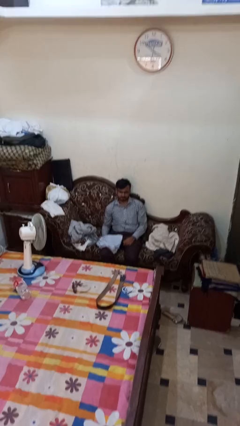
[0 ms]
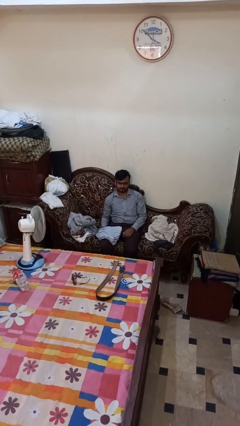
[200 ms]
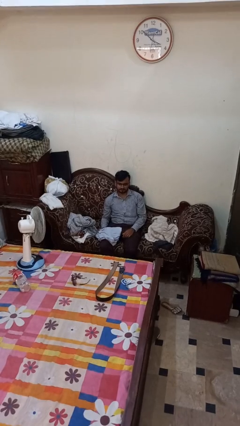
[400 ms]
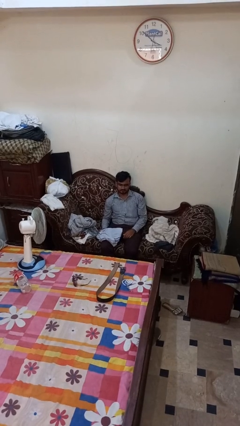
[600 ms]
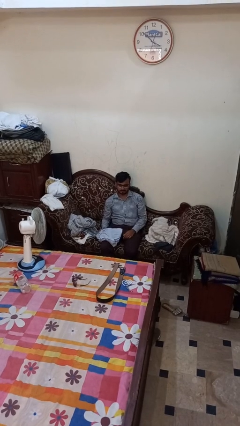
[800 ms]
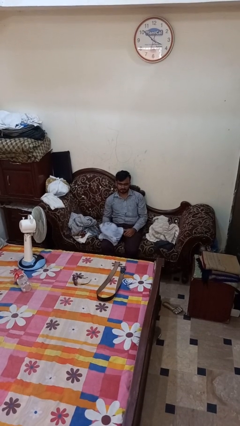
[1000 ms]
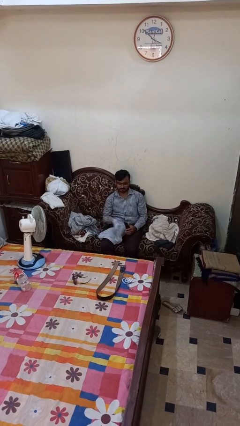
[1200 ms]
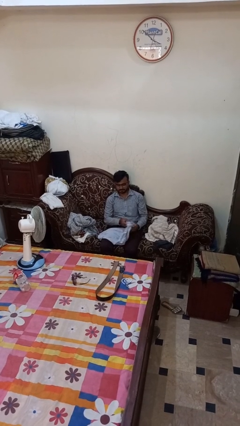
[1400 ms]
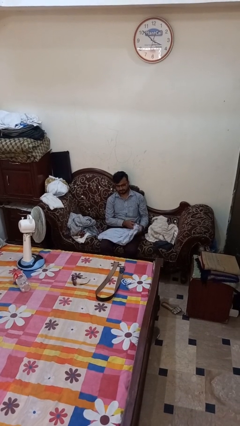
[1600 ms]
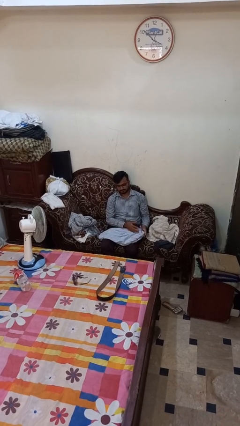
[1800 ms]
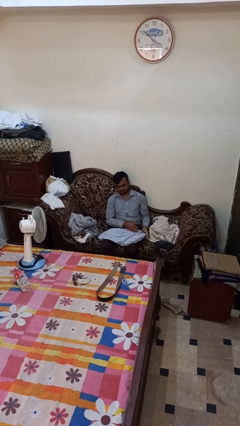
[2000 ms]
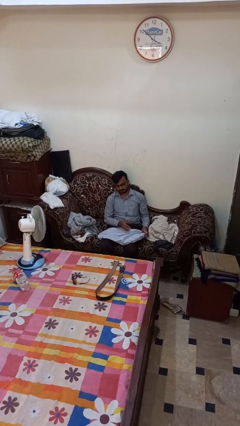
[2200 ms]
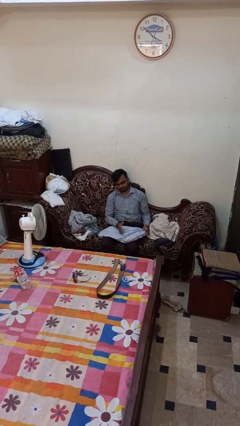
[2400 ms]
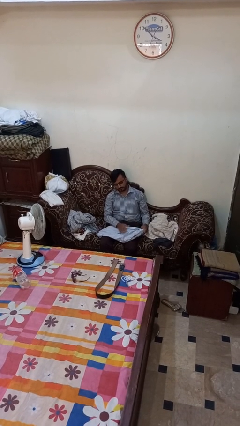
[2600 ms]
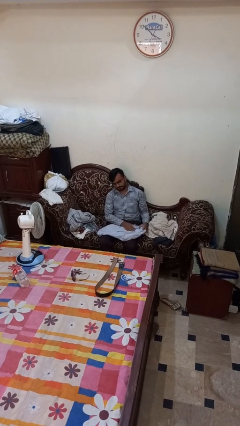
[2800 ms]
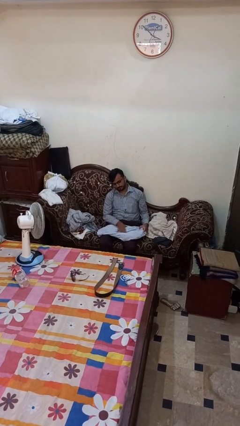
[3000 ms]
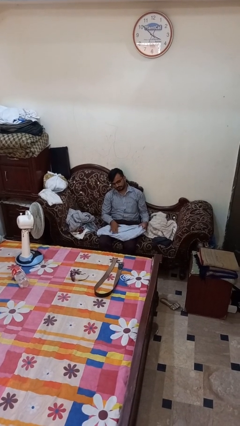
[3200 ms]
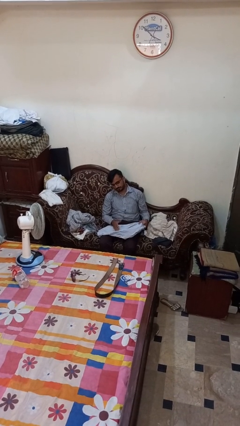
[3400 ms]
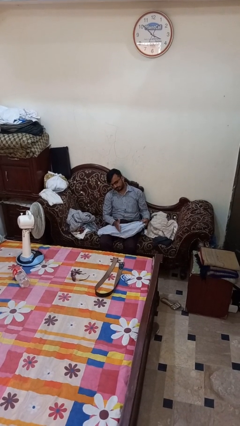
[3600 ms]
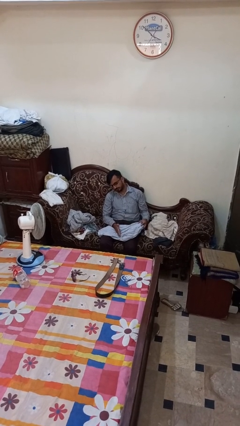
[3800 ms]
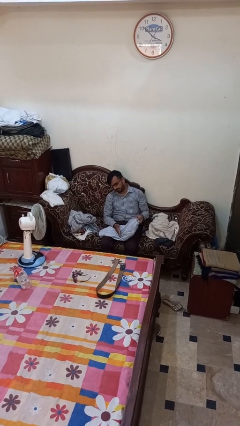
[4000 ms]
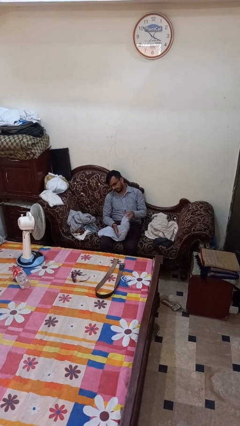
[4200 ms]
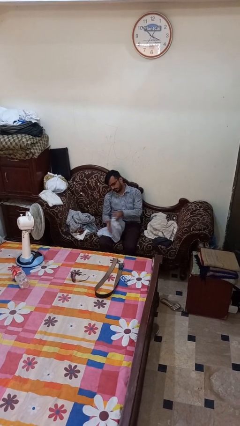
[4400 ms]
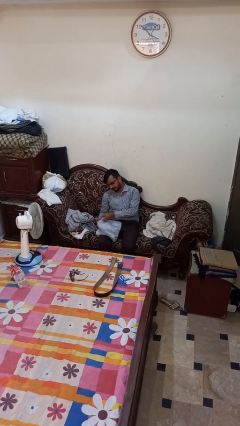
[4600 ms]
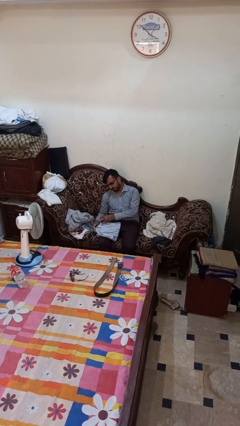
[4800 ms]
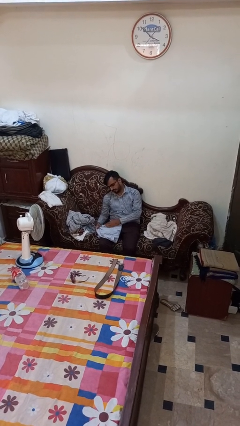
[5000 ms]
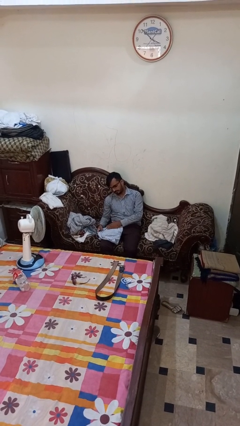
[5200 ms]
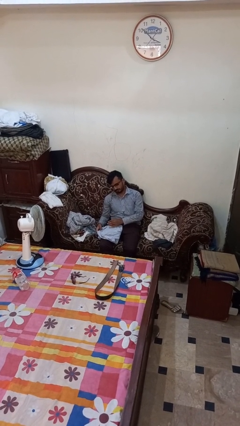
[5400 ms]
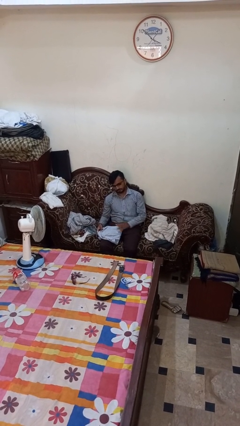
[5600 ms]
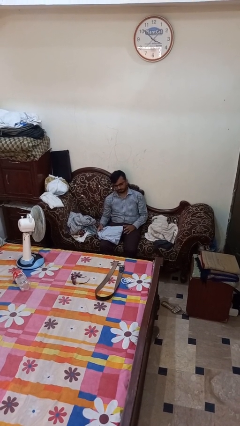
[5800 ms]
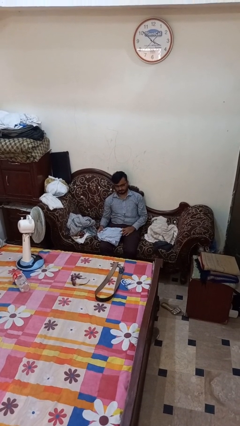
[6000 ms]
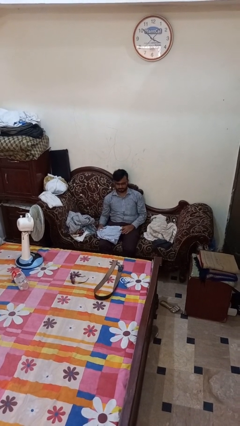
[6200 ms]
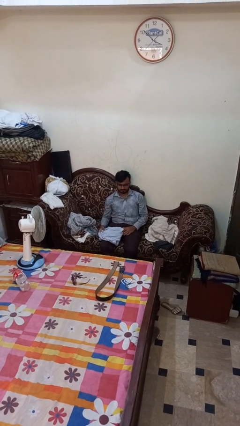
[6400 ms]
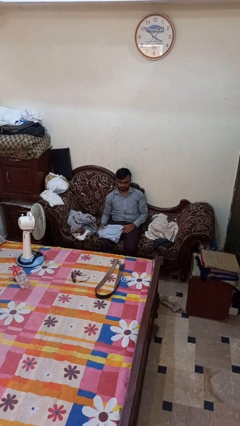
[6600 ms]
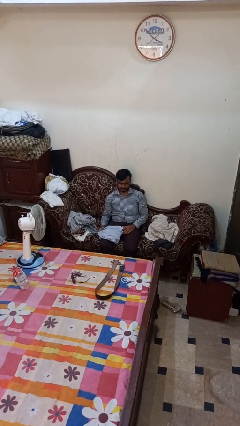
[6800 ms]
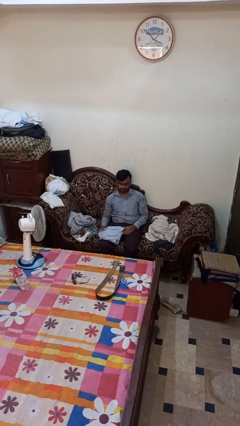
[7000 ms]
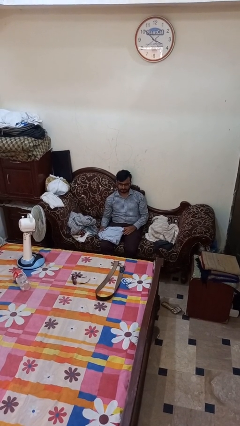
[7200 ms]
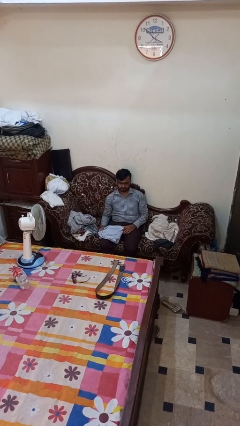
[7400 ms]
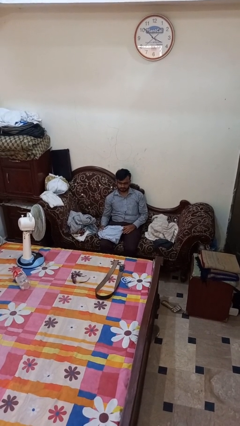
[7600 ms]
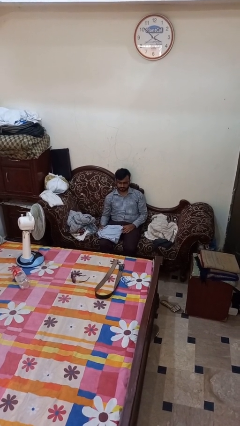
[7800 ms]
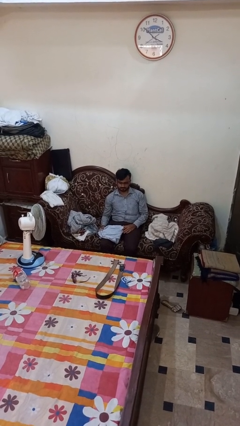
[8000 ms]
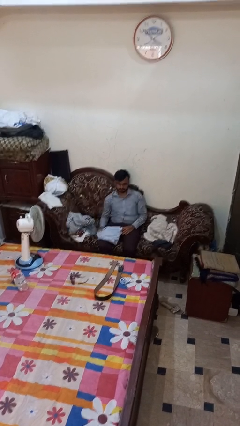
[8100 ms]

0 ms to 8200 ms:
person folds pants

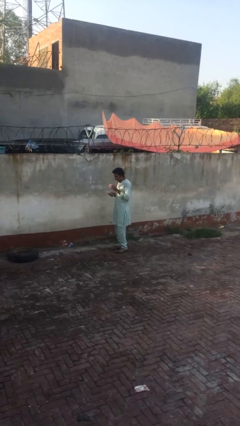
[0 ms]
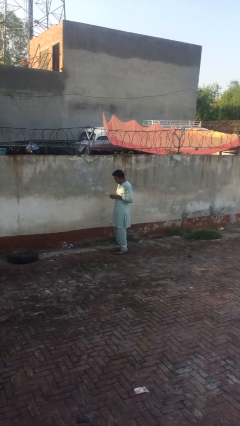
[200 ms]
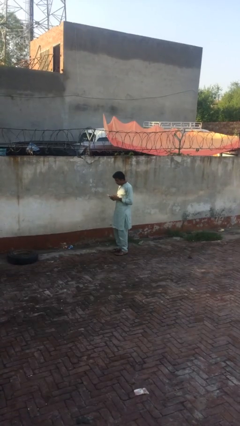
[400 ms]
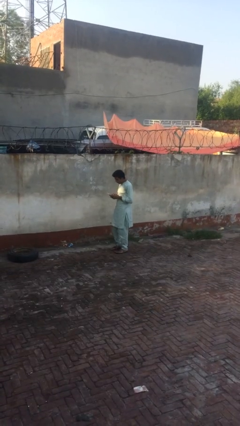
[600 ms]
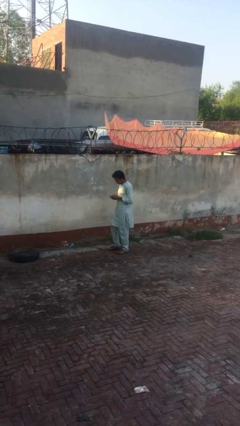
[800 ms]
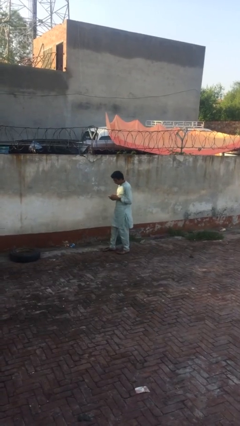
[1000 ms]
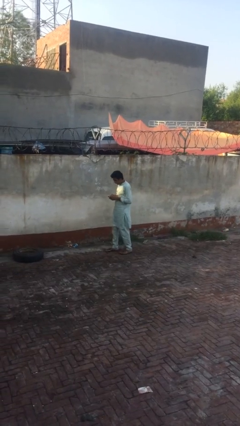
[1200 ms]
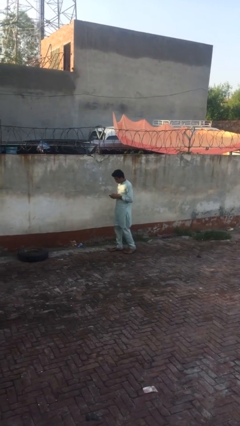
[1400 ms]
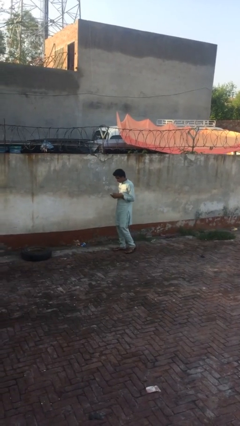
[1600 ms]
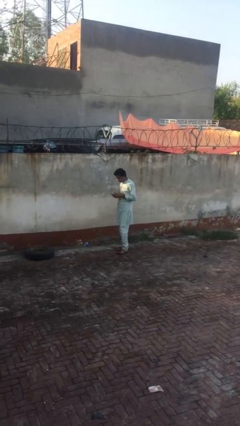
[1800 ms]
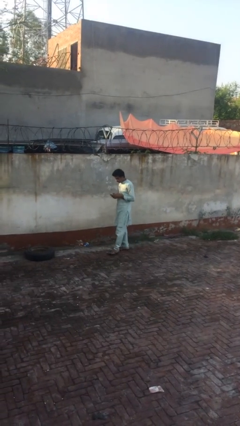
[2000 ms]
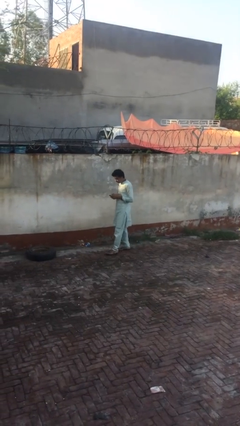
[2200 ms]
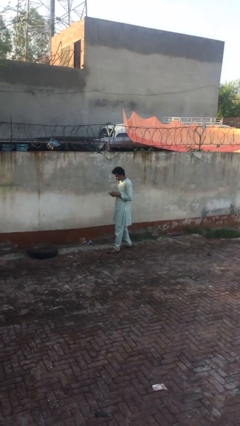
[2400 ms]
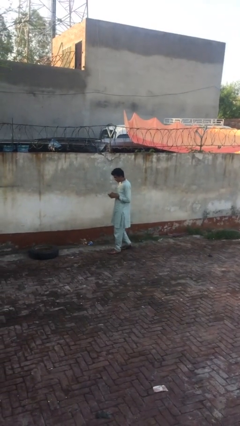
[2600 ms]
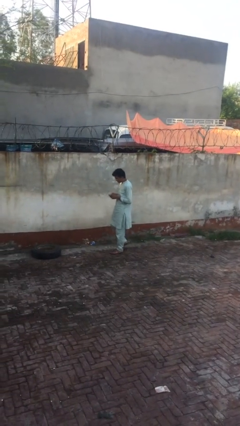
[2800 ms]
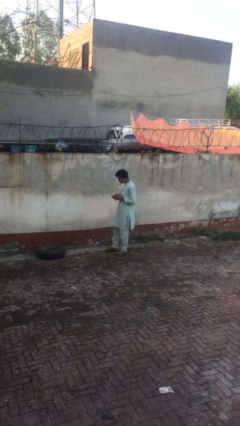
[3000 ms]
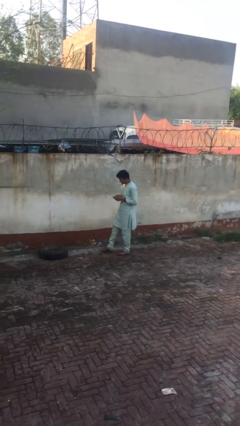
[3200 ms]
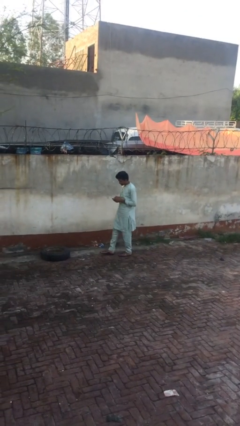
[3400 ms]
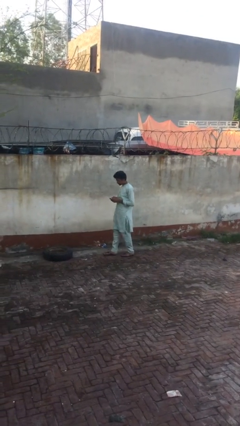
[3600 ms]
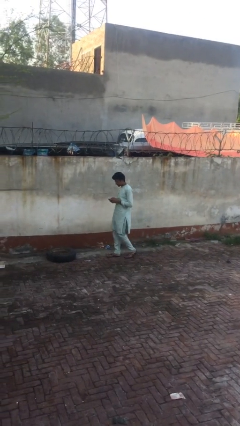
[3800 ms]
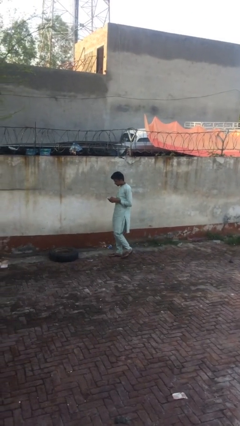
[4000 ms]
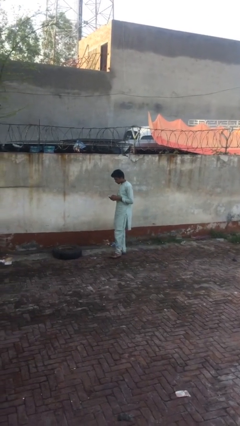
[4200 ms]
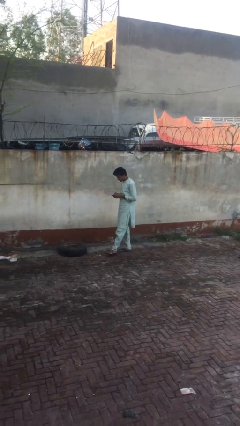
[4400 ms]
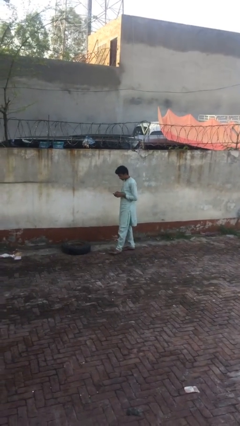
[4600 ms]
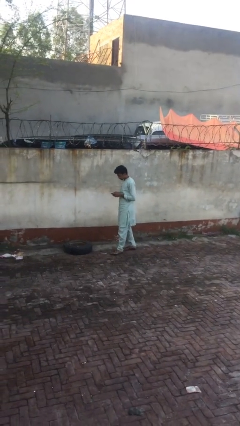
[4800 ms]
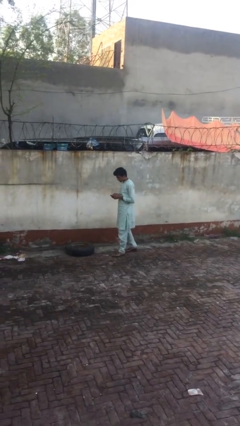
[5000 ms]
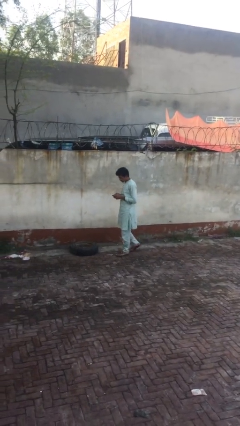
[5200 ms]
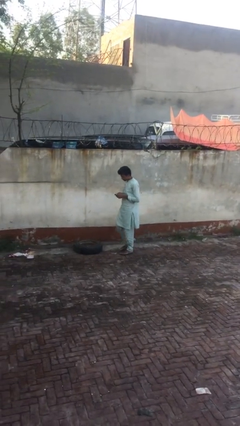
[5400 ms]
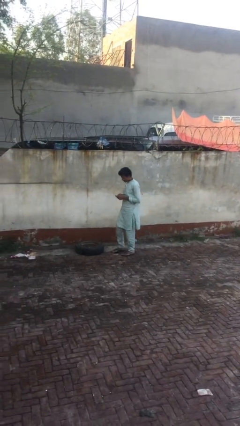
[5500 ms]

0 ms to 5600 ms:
person texts on phone

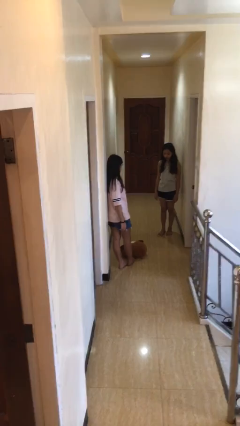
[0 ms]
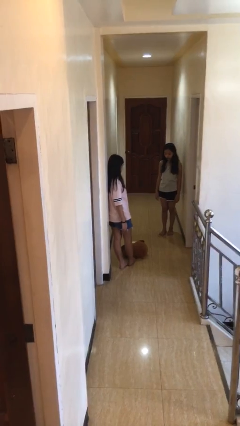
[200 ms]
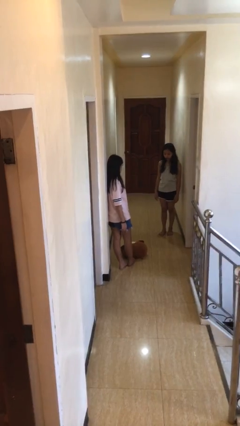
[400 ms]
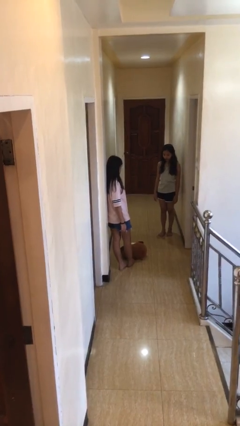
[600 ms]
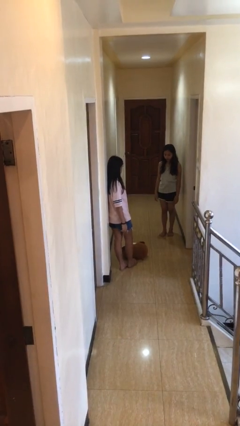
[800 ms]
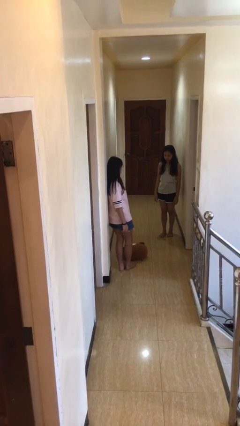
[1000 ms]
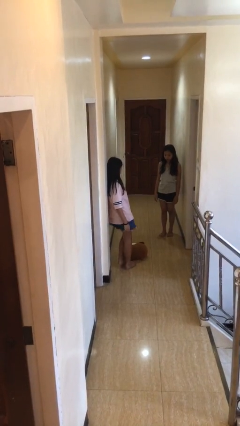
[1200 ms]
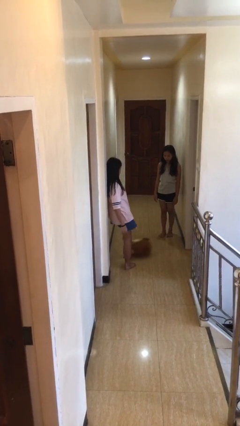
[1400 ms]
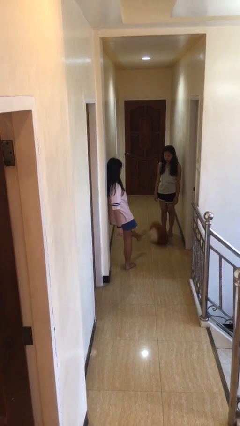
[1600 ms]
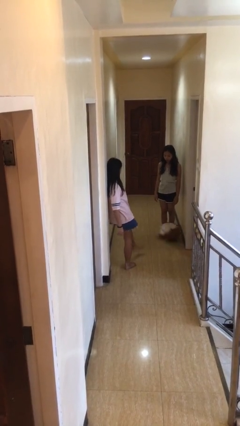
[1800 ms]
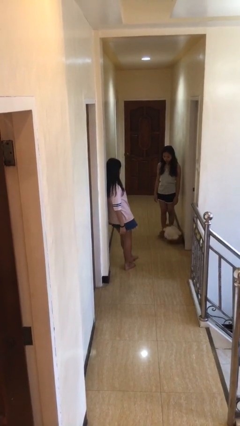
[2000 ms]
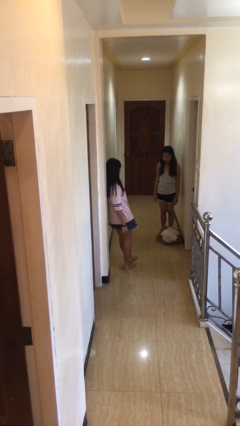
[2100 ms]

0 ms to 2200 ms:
person kicks object to person

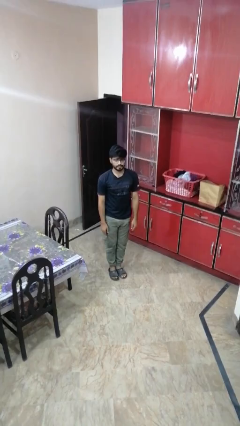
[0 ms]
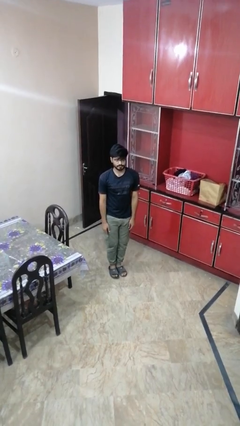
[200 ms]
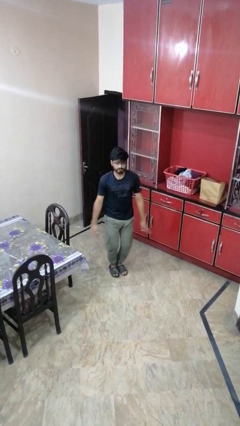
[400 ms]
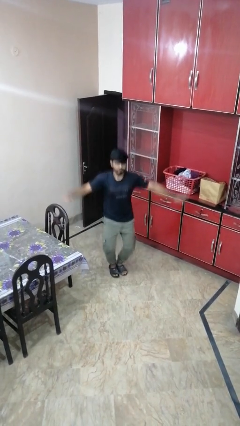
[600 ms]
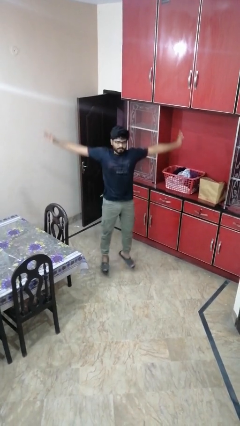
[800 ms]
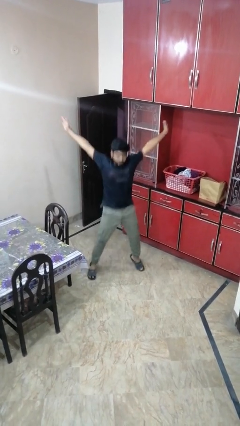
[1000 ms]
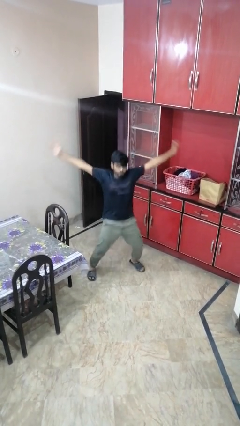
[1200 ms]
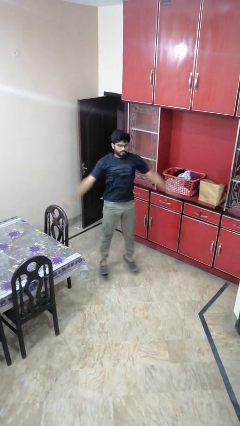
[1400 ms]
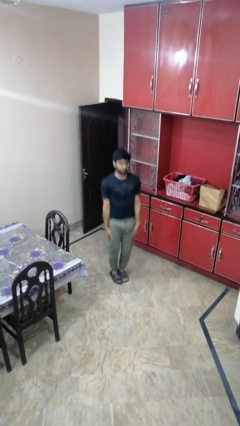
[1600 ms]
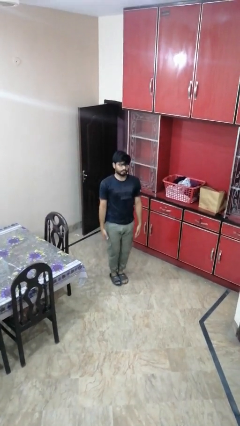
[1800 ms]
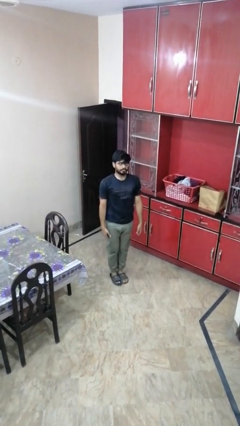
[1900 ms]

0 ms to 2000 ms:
person exercises with jumping jacks
